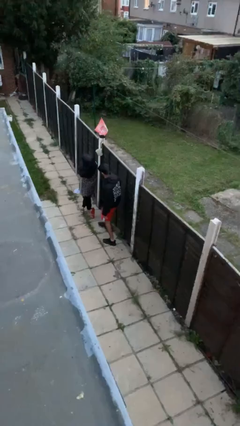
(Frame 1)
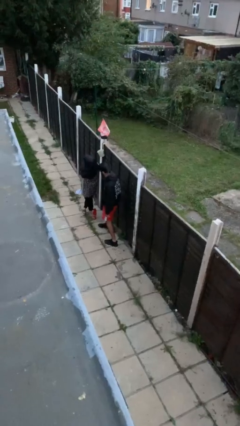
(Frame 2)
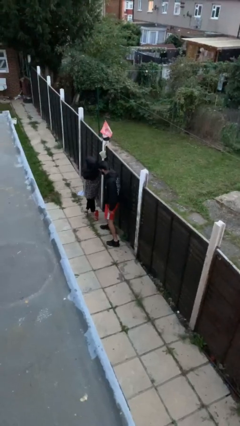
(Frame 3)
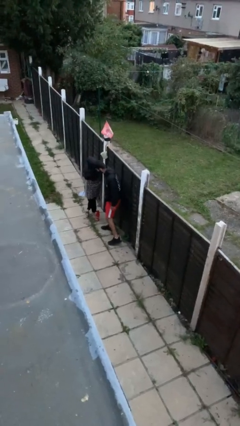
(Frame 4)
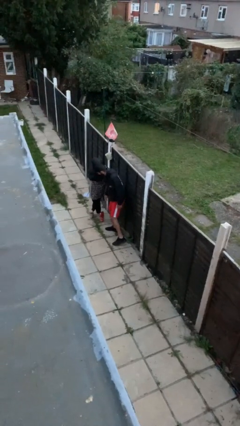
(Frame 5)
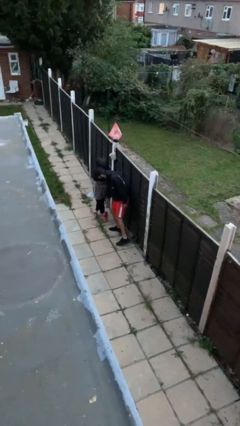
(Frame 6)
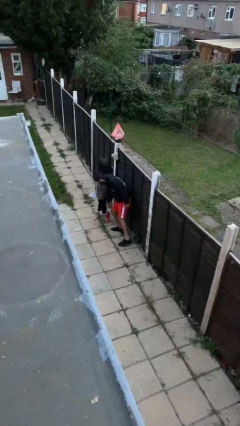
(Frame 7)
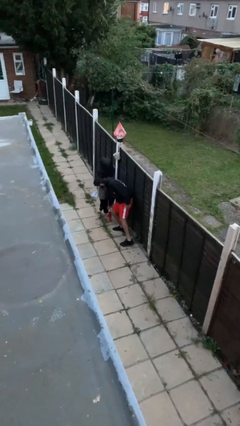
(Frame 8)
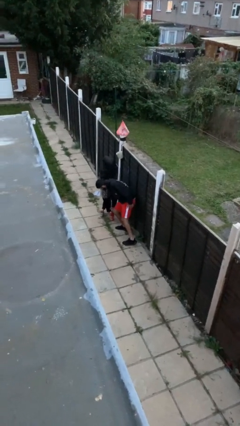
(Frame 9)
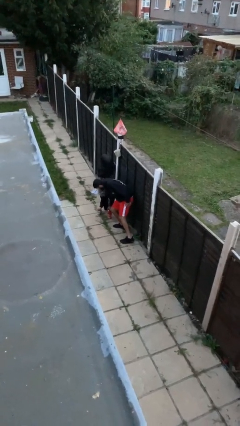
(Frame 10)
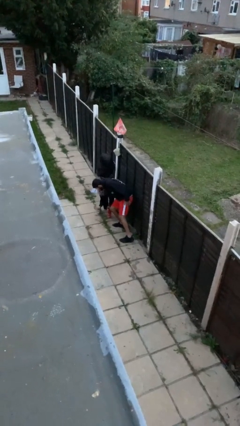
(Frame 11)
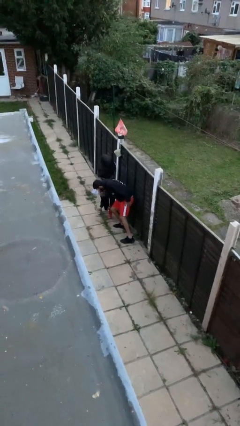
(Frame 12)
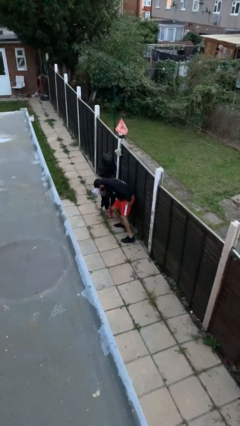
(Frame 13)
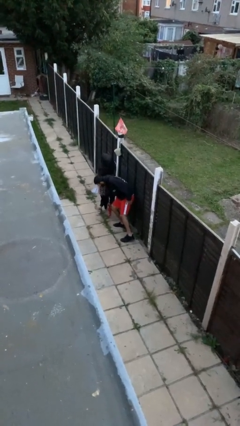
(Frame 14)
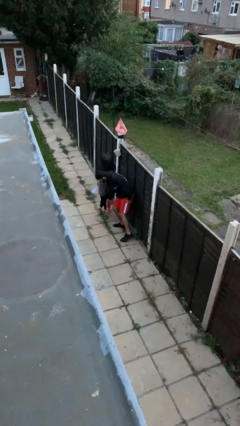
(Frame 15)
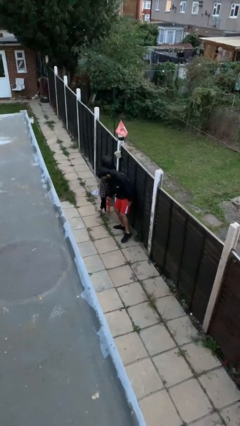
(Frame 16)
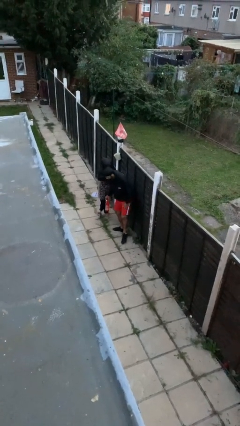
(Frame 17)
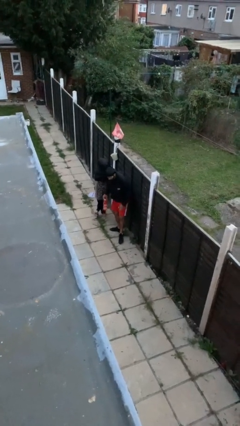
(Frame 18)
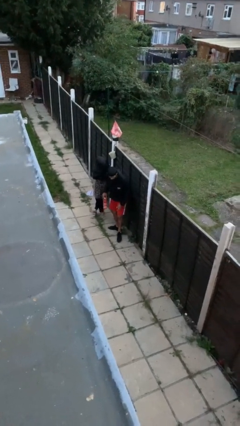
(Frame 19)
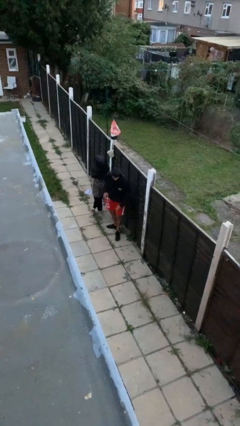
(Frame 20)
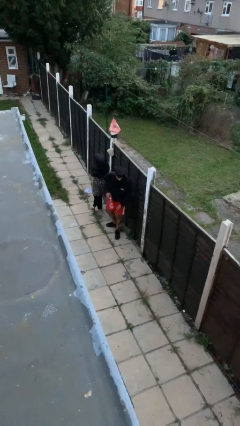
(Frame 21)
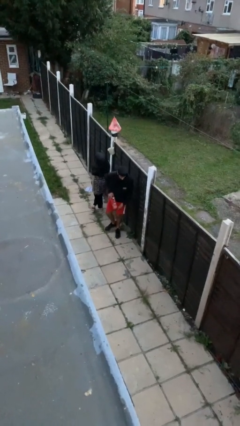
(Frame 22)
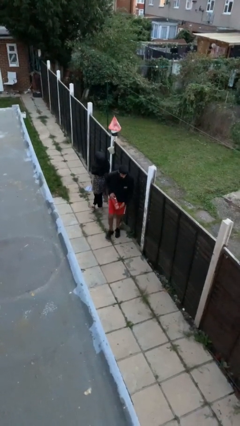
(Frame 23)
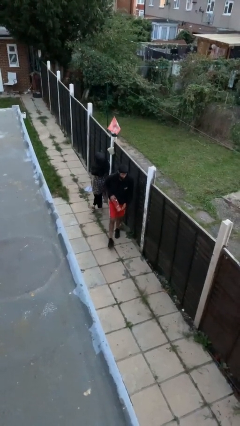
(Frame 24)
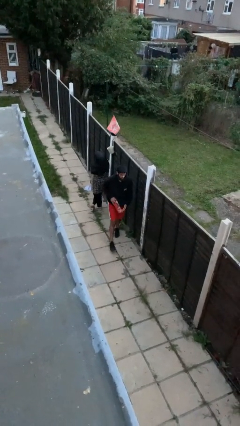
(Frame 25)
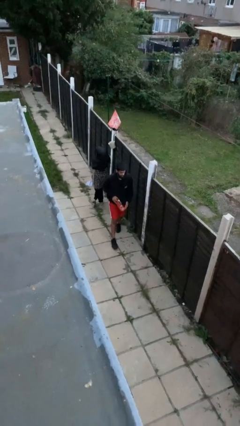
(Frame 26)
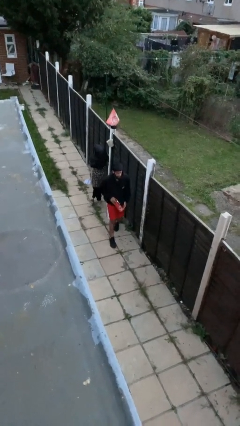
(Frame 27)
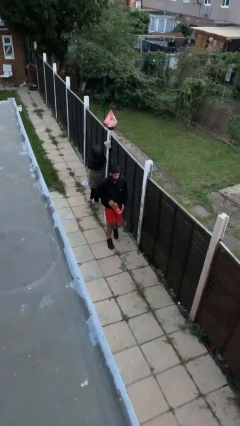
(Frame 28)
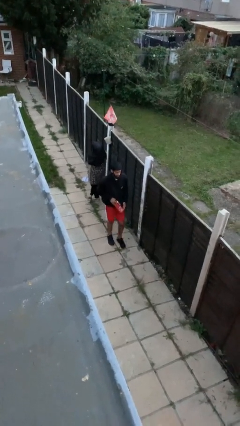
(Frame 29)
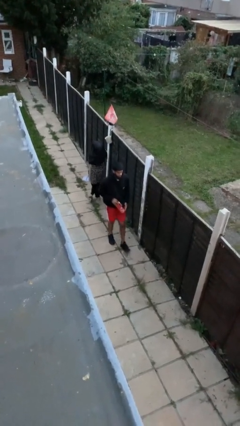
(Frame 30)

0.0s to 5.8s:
person steals object from person

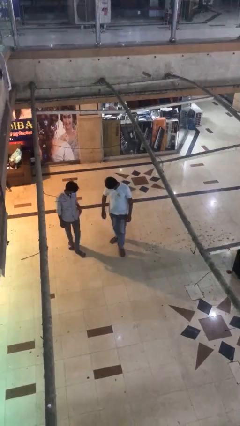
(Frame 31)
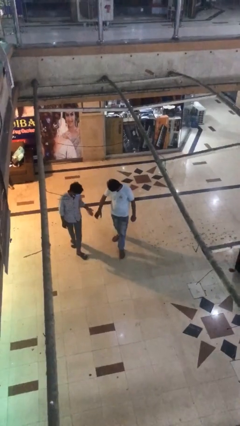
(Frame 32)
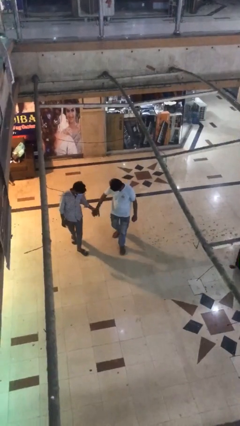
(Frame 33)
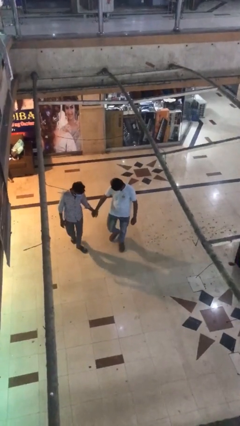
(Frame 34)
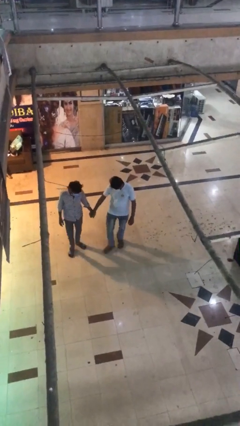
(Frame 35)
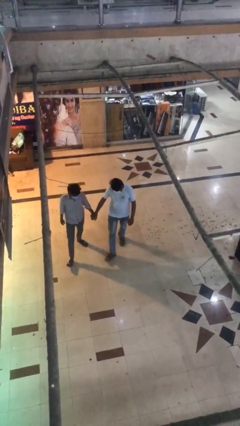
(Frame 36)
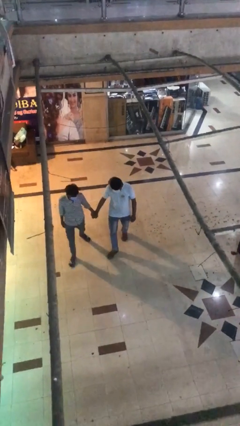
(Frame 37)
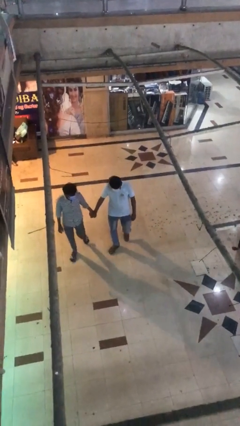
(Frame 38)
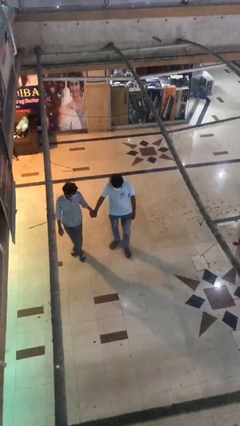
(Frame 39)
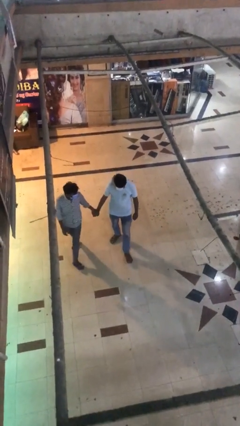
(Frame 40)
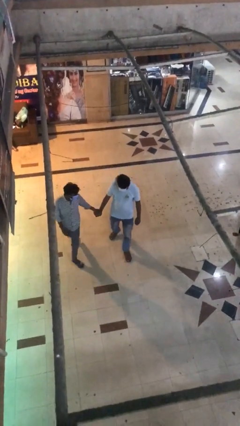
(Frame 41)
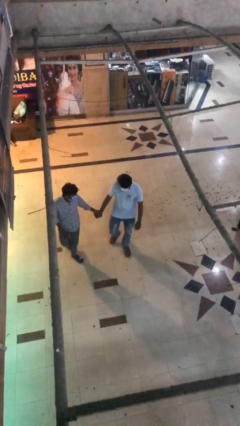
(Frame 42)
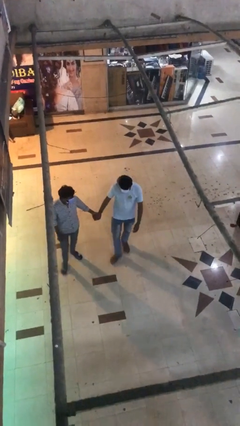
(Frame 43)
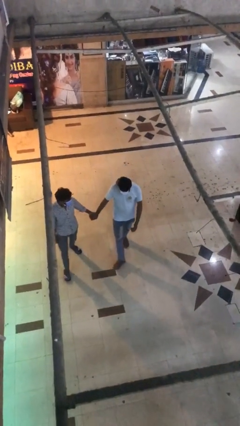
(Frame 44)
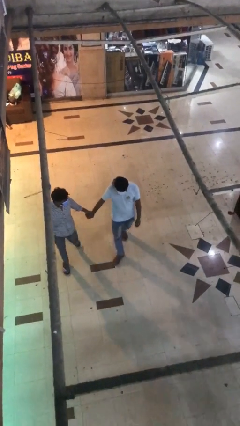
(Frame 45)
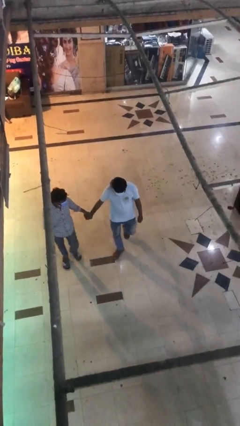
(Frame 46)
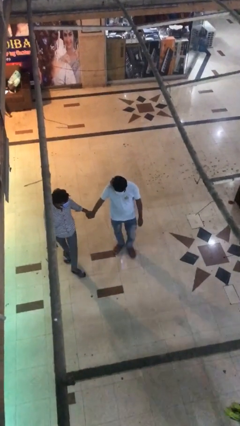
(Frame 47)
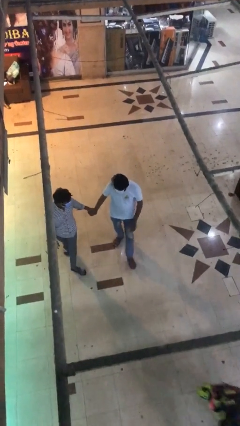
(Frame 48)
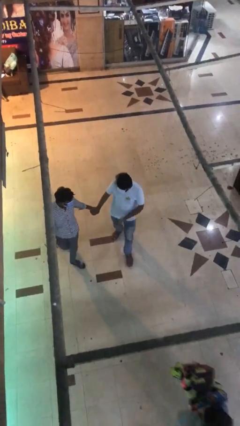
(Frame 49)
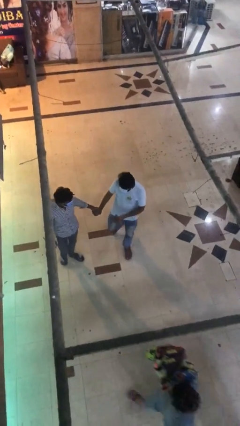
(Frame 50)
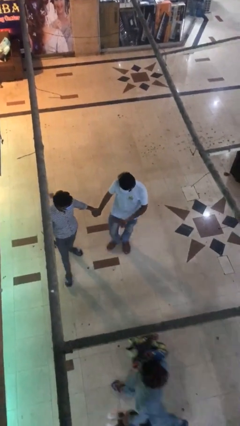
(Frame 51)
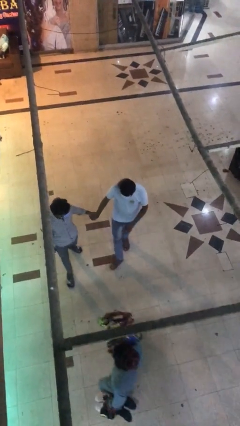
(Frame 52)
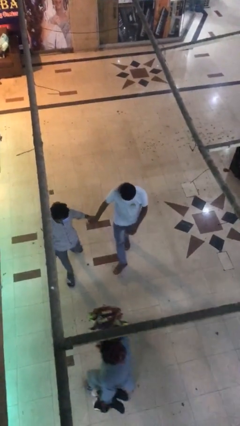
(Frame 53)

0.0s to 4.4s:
person holds hand

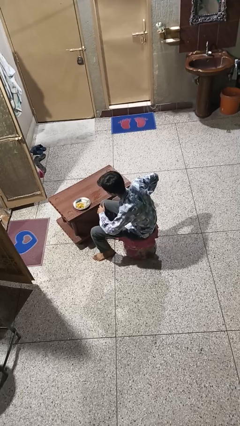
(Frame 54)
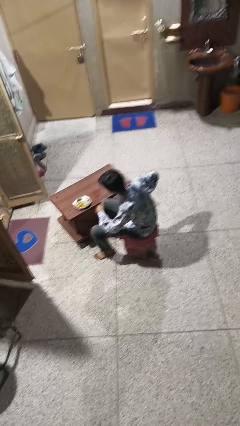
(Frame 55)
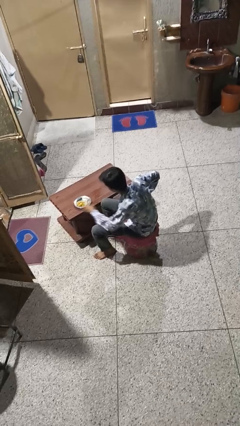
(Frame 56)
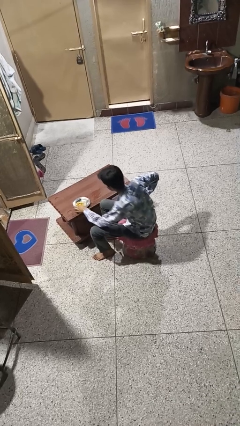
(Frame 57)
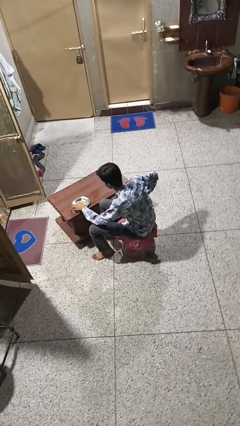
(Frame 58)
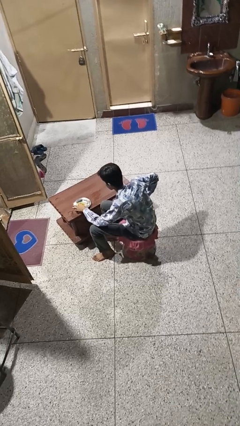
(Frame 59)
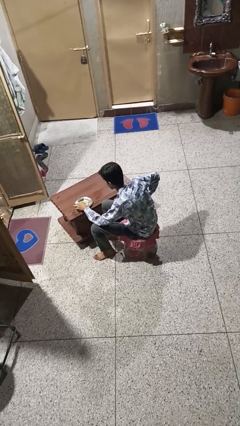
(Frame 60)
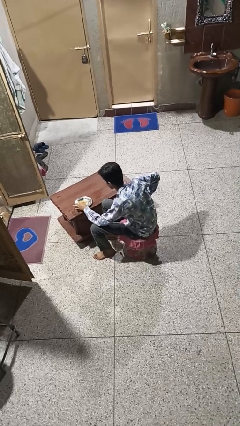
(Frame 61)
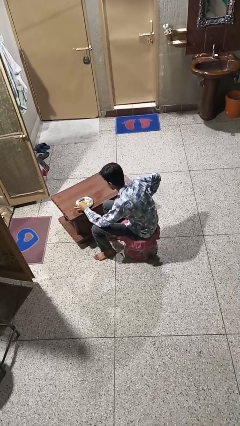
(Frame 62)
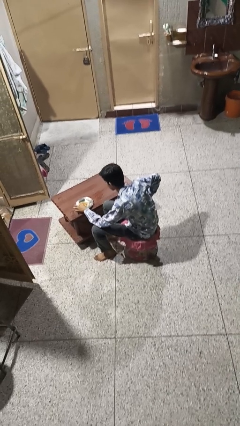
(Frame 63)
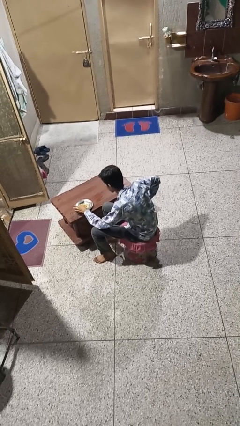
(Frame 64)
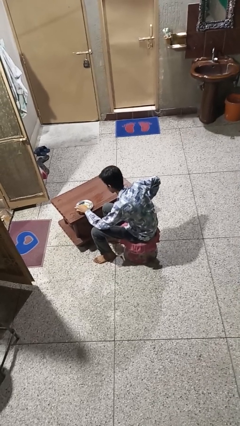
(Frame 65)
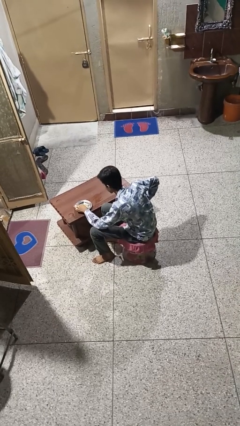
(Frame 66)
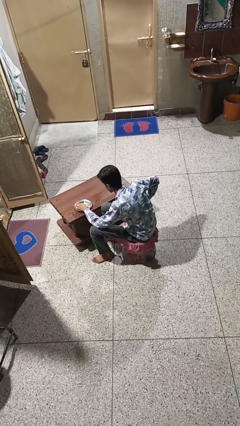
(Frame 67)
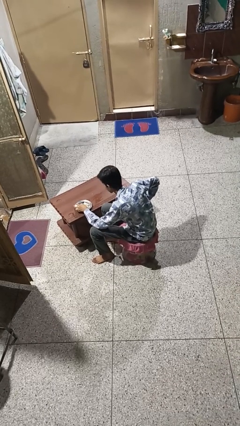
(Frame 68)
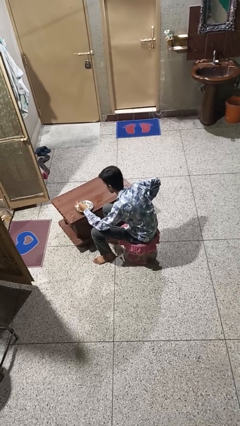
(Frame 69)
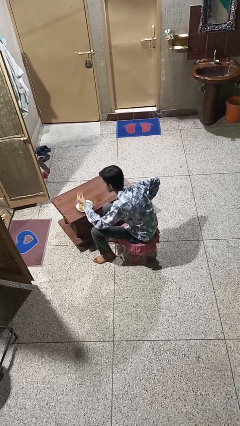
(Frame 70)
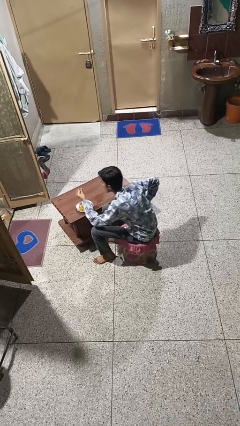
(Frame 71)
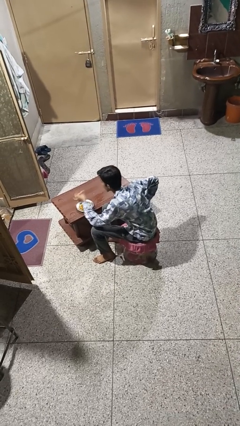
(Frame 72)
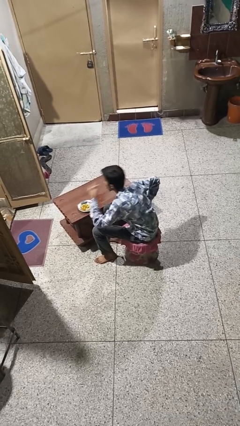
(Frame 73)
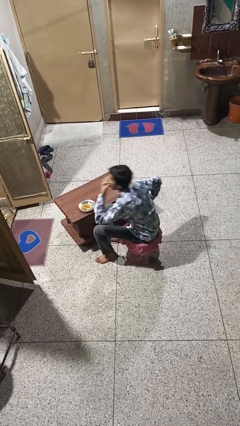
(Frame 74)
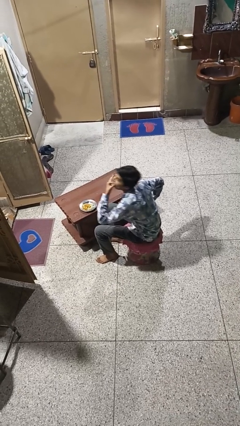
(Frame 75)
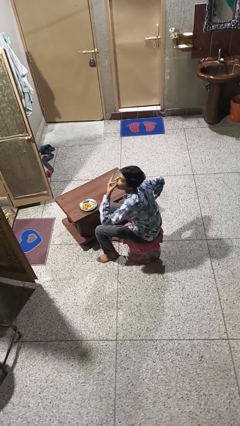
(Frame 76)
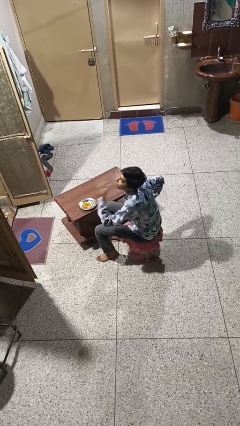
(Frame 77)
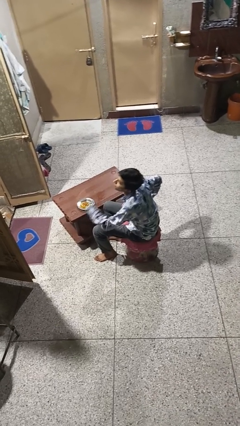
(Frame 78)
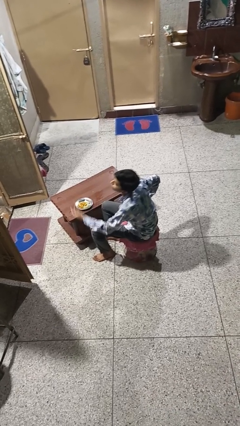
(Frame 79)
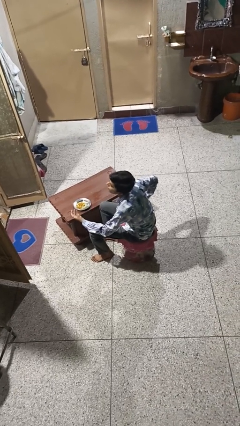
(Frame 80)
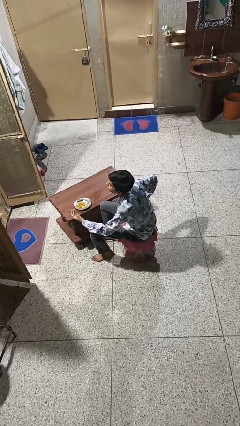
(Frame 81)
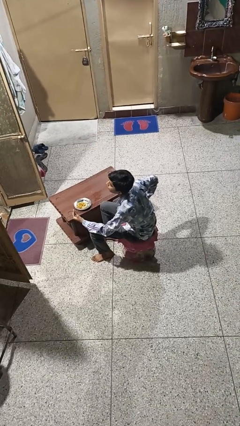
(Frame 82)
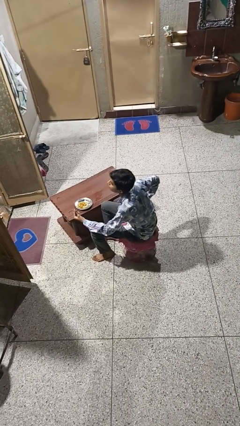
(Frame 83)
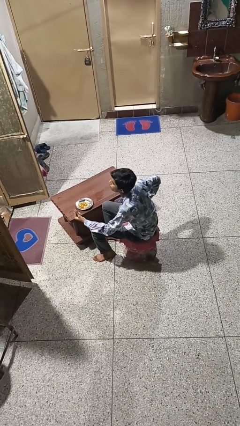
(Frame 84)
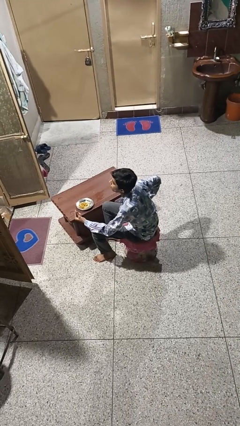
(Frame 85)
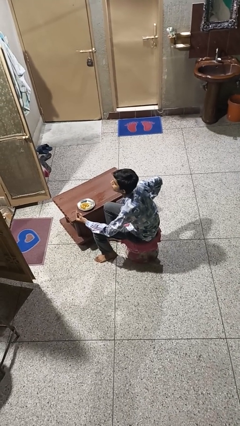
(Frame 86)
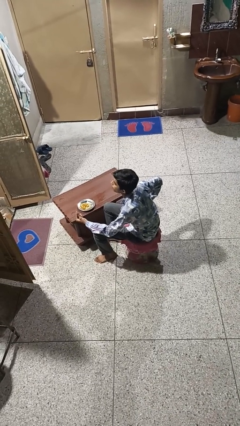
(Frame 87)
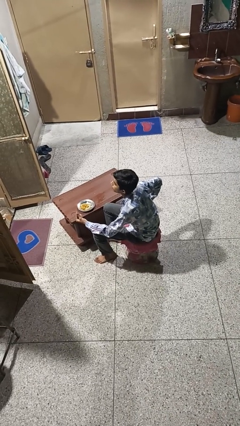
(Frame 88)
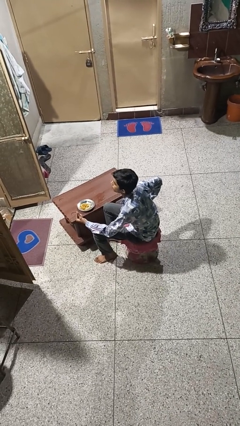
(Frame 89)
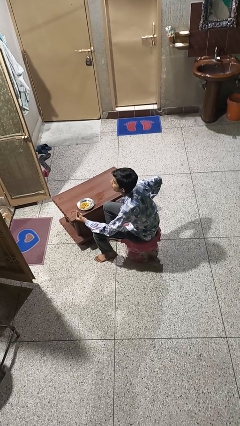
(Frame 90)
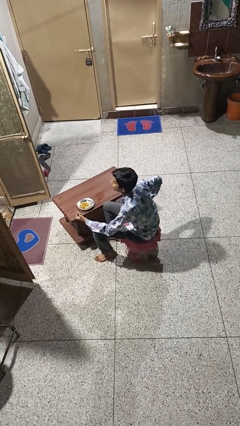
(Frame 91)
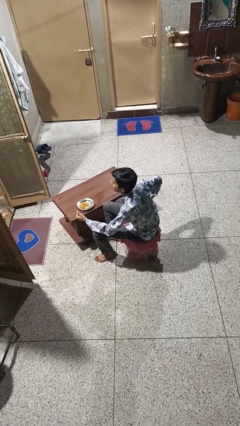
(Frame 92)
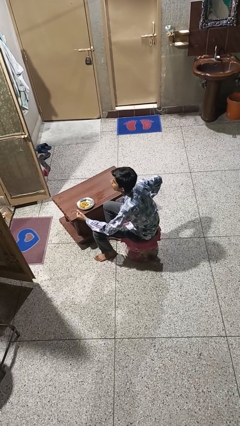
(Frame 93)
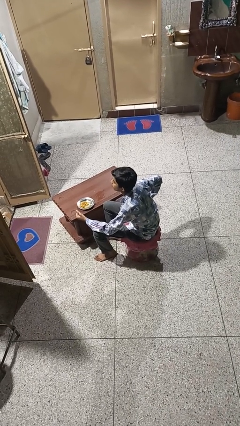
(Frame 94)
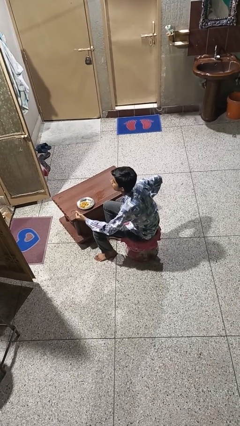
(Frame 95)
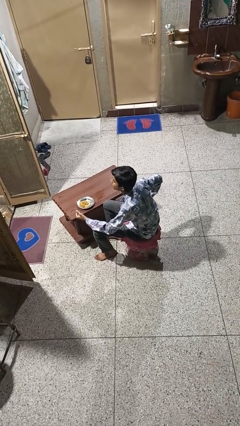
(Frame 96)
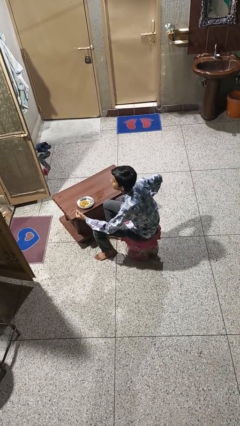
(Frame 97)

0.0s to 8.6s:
person eats with hands
